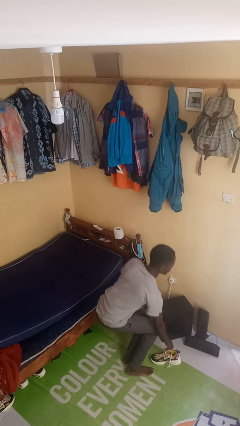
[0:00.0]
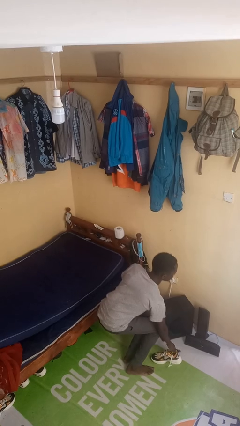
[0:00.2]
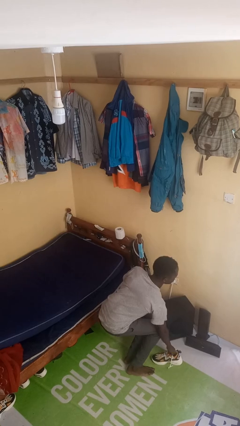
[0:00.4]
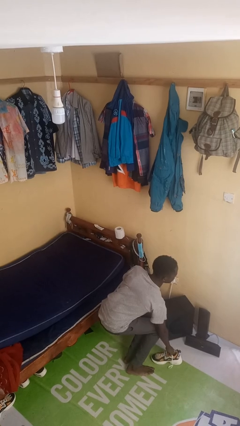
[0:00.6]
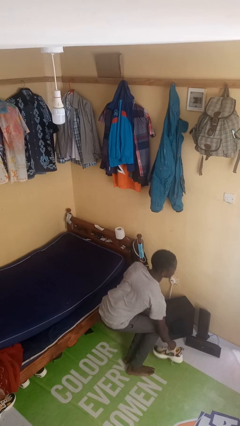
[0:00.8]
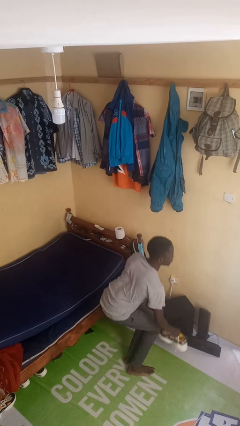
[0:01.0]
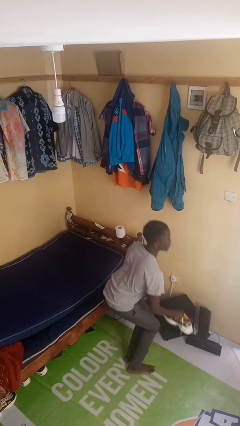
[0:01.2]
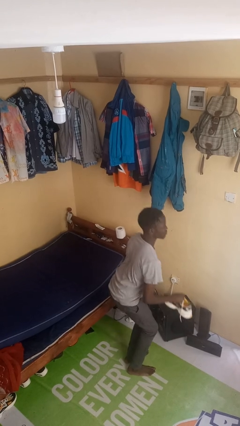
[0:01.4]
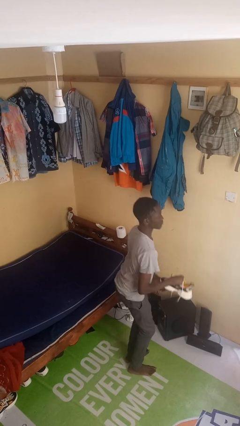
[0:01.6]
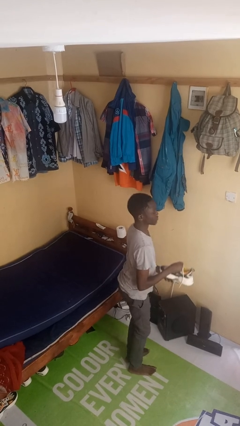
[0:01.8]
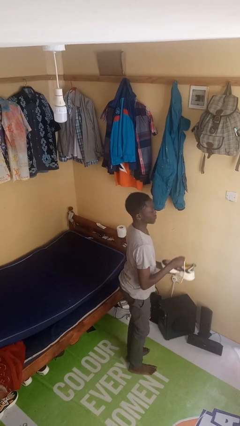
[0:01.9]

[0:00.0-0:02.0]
person picks up object from floor

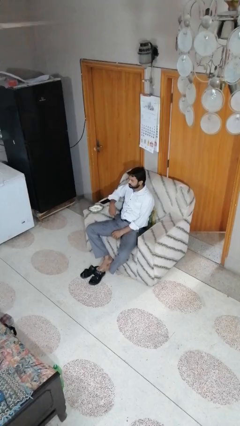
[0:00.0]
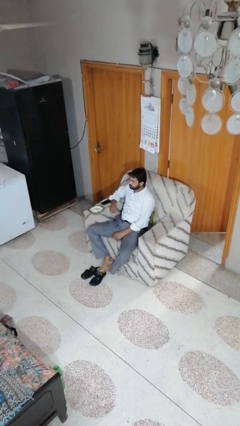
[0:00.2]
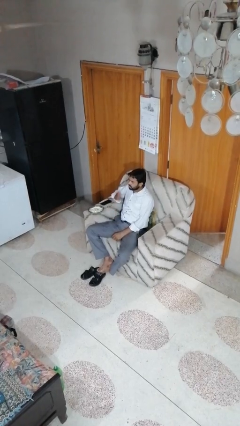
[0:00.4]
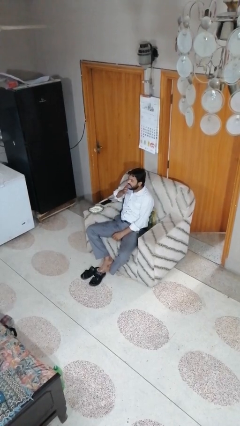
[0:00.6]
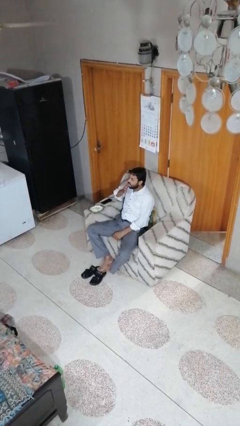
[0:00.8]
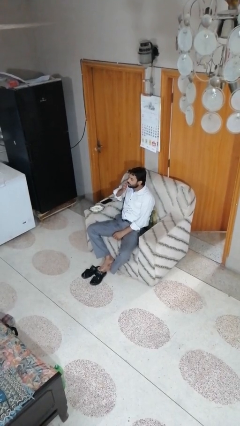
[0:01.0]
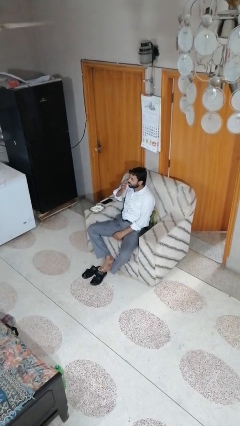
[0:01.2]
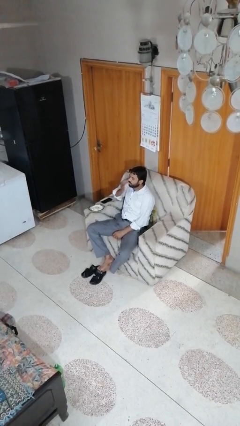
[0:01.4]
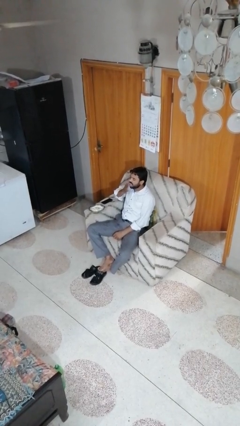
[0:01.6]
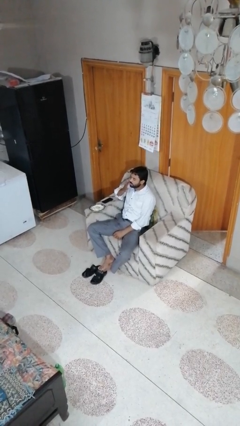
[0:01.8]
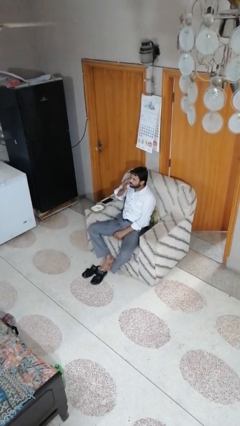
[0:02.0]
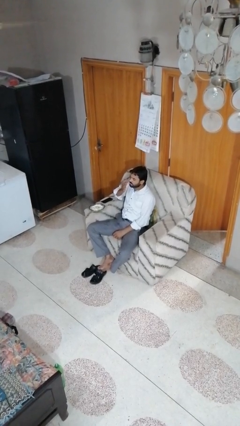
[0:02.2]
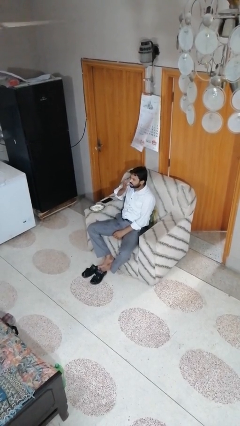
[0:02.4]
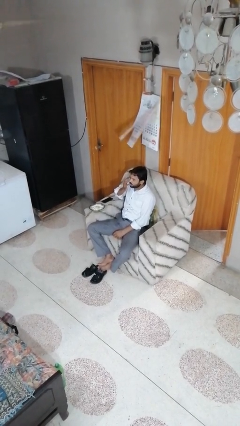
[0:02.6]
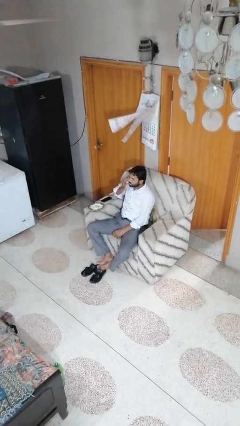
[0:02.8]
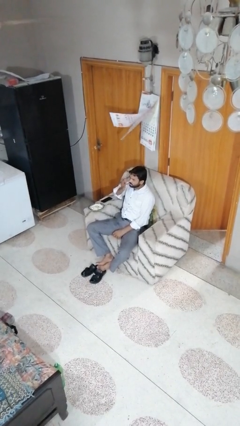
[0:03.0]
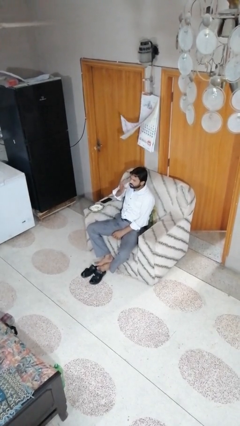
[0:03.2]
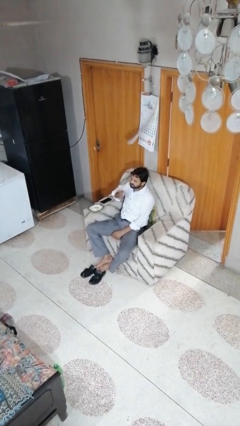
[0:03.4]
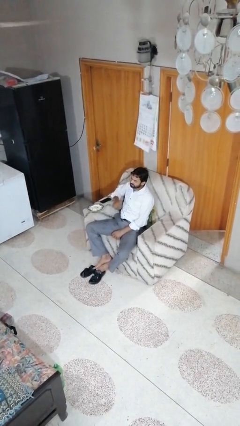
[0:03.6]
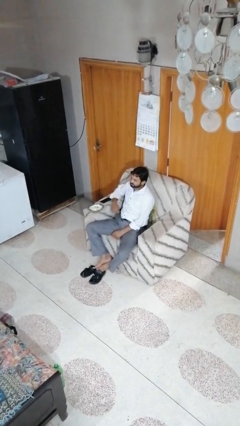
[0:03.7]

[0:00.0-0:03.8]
person licks fingers

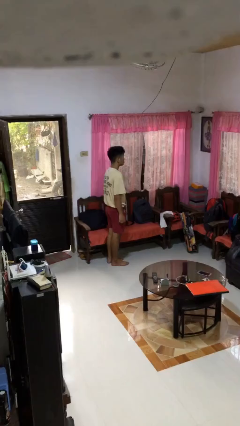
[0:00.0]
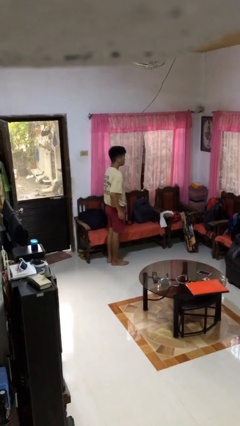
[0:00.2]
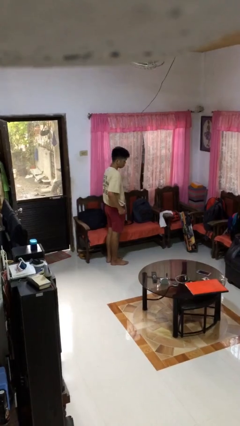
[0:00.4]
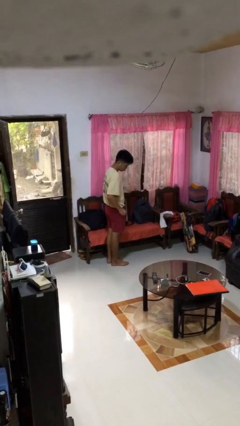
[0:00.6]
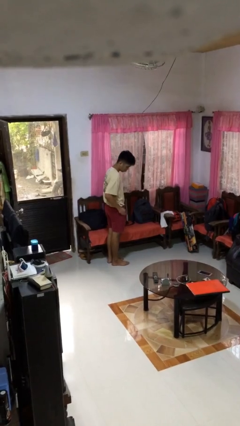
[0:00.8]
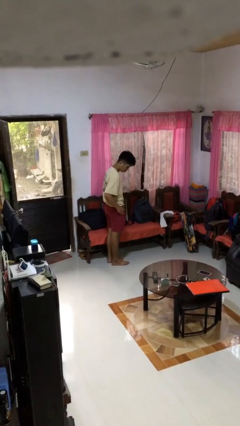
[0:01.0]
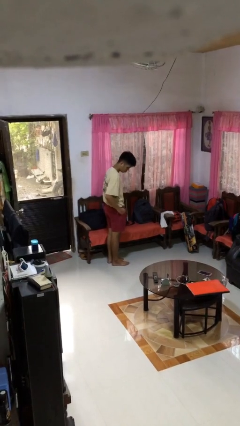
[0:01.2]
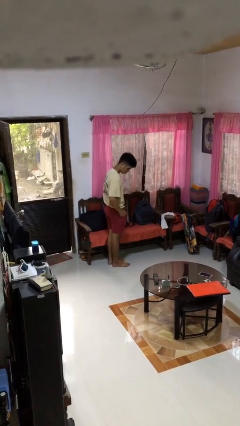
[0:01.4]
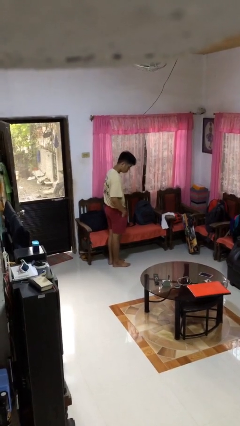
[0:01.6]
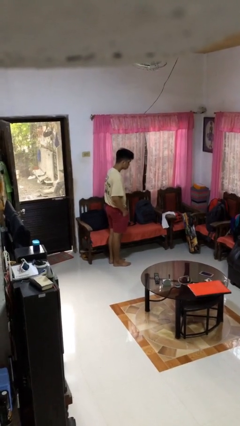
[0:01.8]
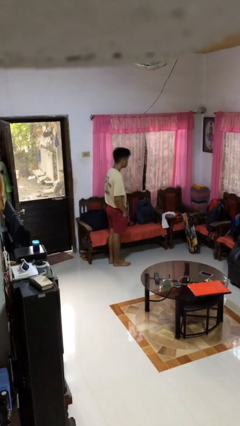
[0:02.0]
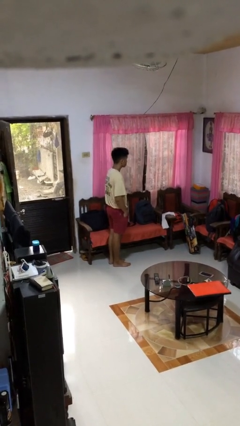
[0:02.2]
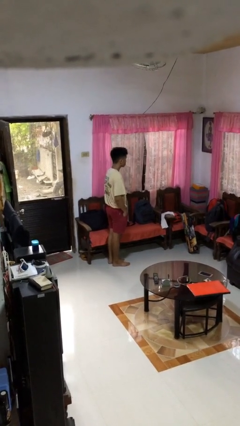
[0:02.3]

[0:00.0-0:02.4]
person puts hands in back pockets

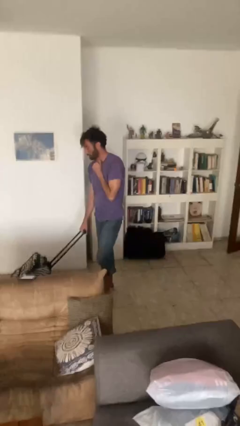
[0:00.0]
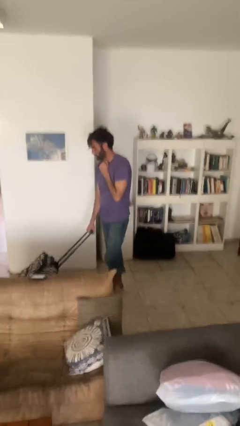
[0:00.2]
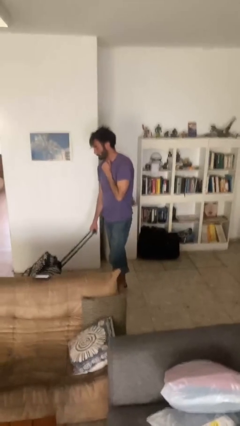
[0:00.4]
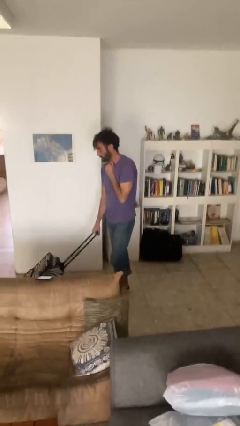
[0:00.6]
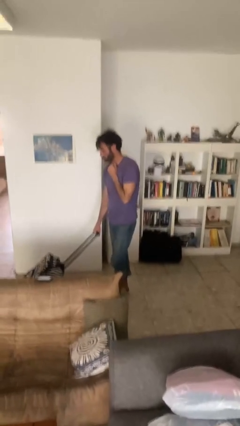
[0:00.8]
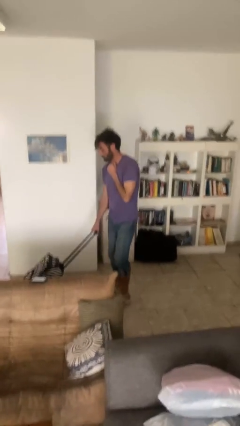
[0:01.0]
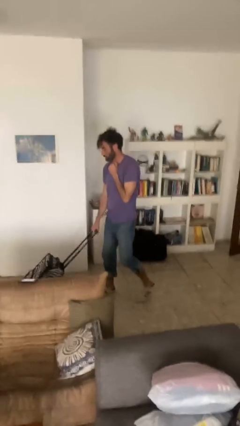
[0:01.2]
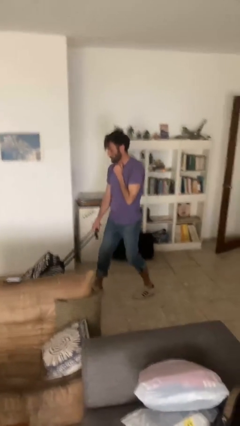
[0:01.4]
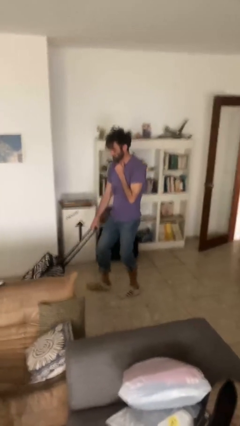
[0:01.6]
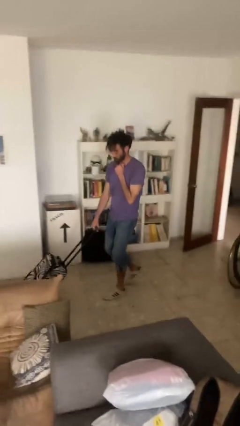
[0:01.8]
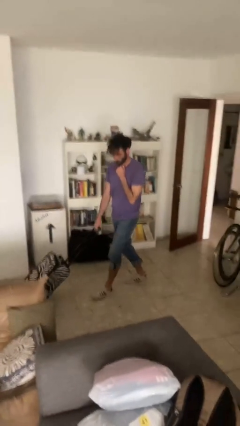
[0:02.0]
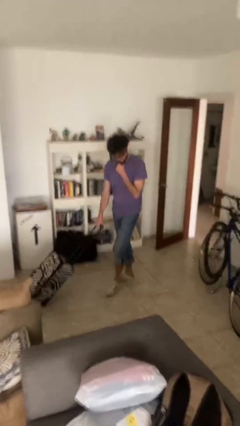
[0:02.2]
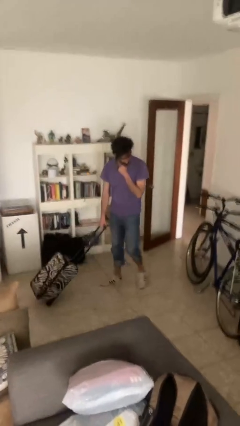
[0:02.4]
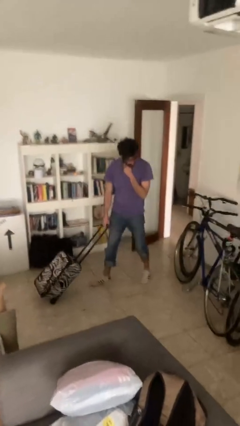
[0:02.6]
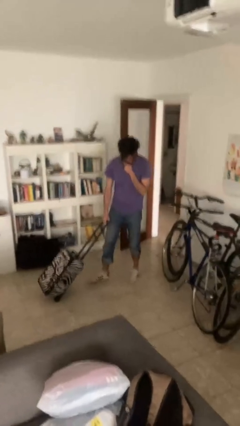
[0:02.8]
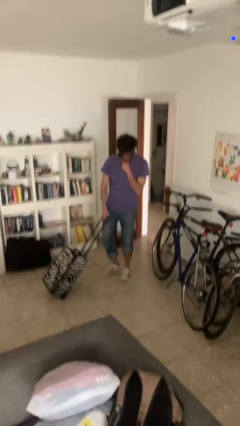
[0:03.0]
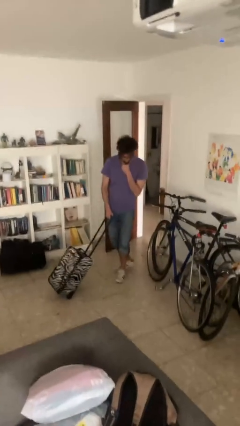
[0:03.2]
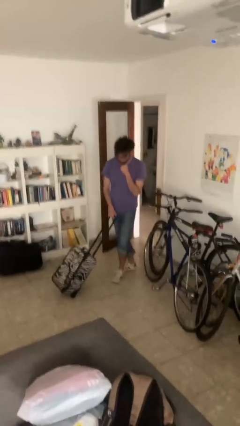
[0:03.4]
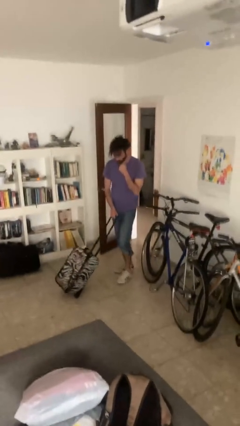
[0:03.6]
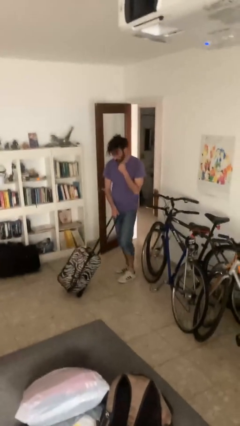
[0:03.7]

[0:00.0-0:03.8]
person pulls wheeled cart

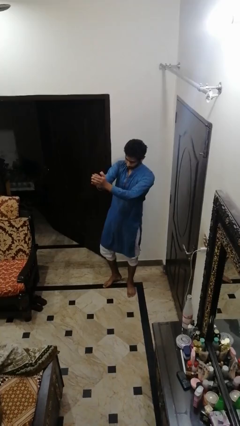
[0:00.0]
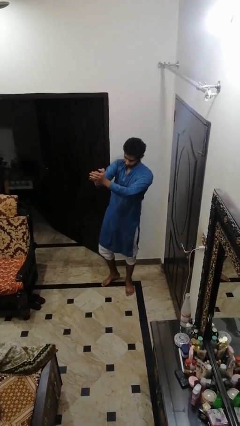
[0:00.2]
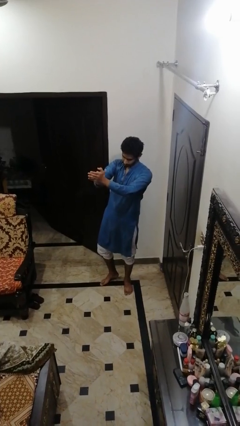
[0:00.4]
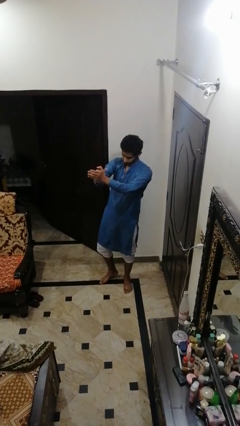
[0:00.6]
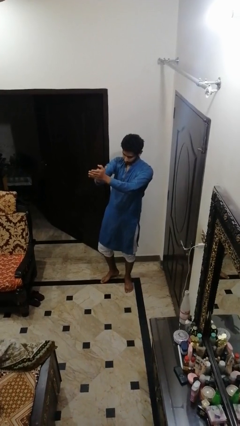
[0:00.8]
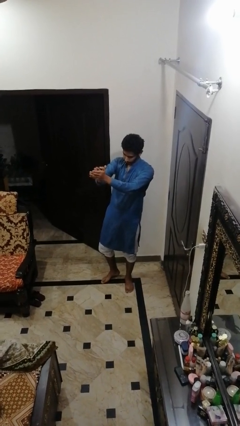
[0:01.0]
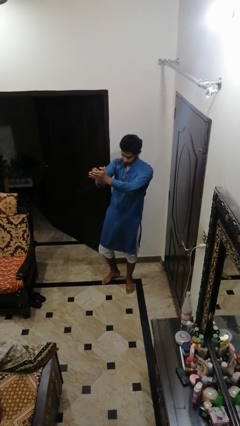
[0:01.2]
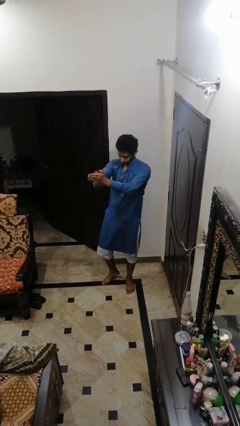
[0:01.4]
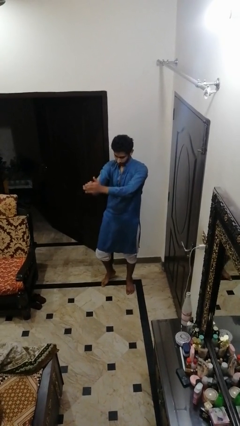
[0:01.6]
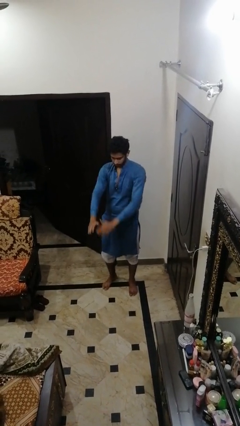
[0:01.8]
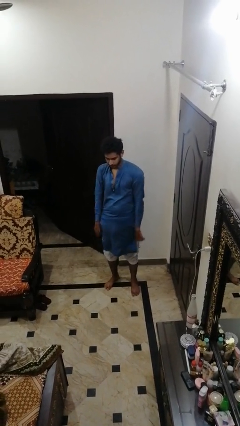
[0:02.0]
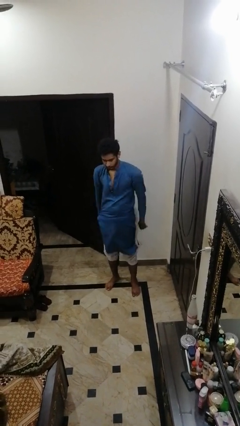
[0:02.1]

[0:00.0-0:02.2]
person claps hands

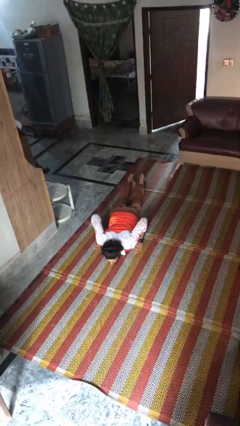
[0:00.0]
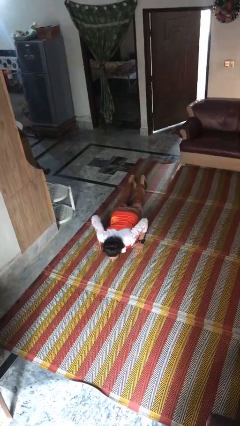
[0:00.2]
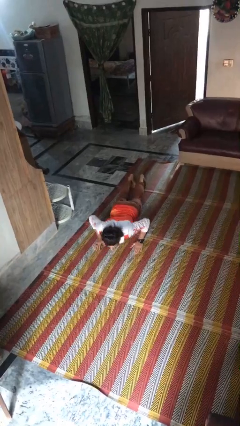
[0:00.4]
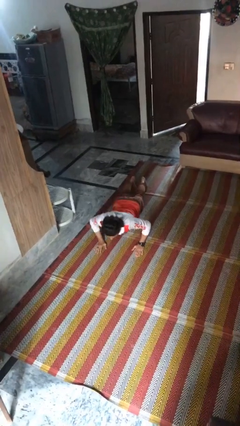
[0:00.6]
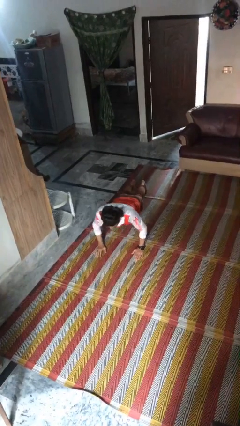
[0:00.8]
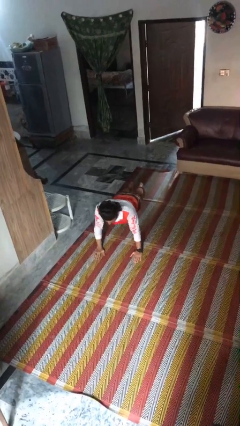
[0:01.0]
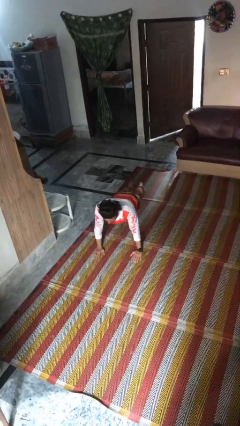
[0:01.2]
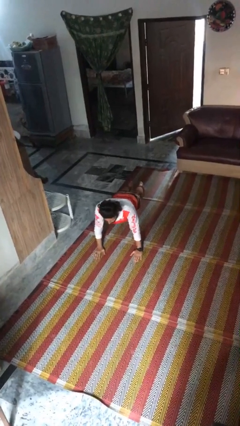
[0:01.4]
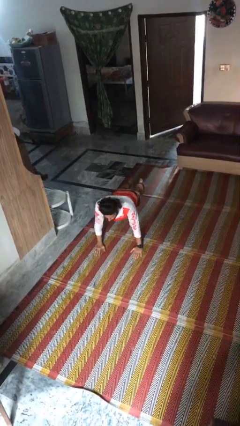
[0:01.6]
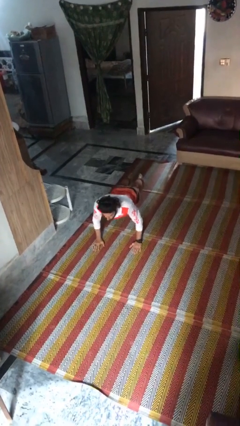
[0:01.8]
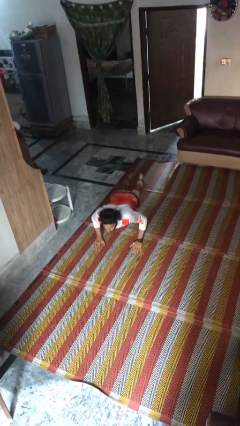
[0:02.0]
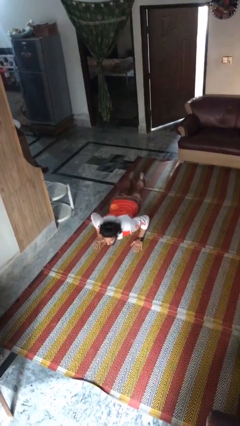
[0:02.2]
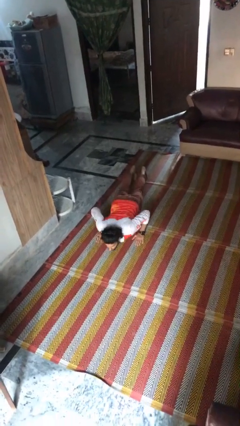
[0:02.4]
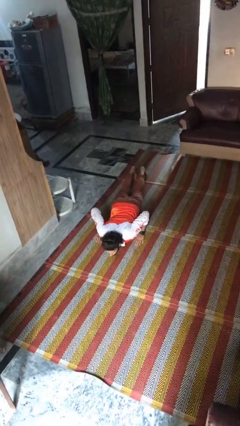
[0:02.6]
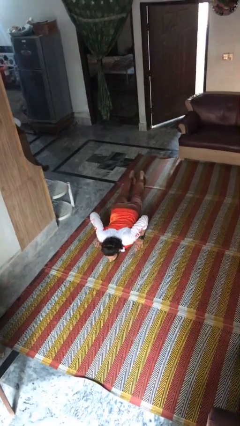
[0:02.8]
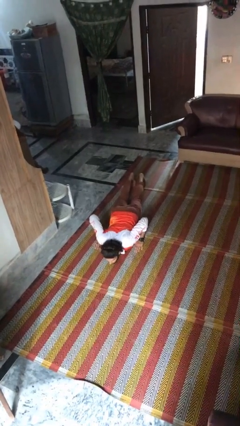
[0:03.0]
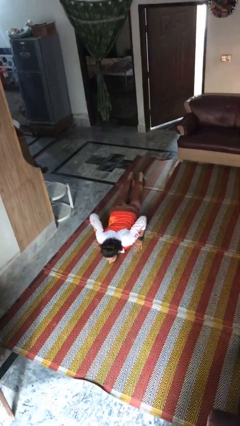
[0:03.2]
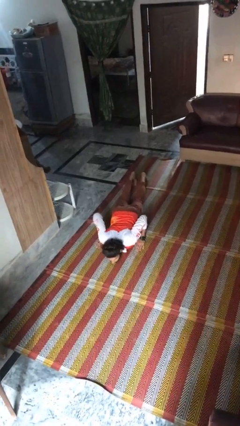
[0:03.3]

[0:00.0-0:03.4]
person exercises with pushup
